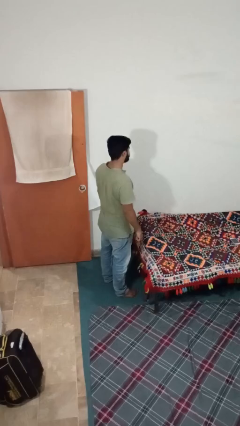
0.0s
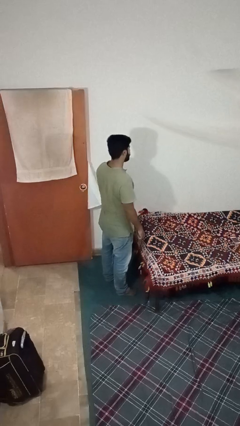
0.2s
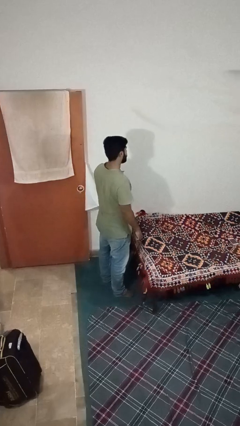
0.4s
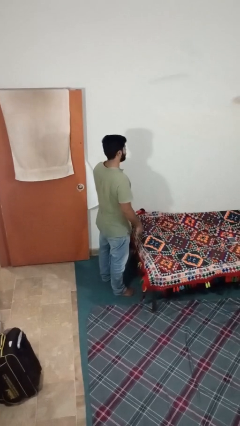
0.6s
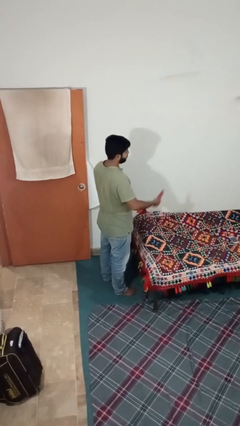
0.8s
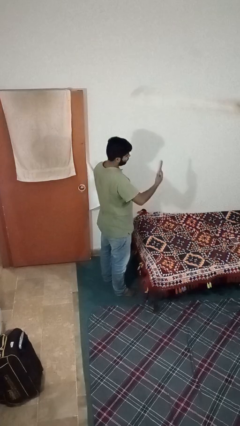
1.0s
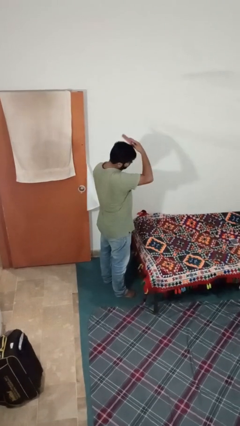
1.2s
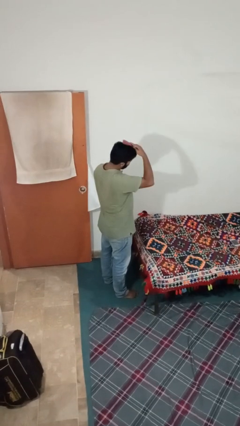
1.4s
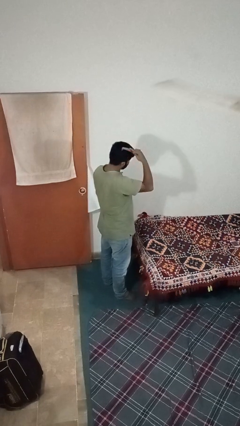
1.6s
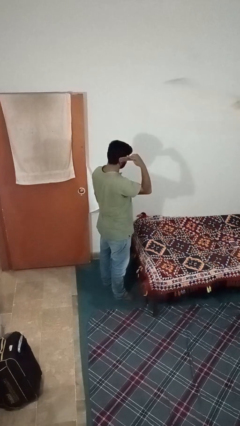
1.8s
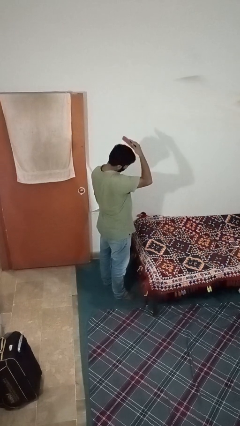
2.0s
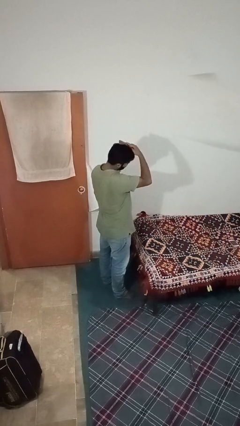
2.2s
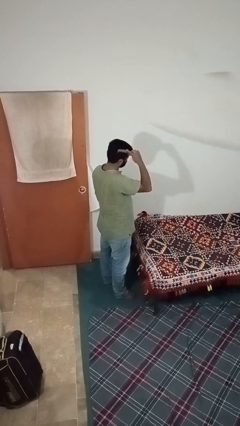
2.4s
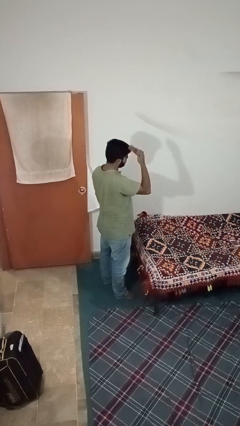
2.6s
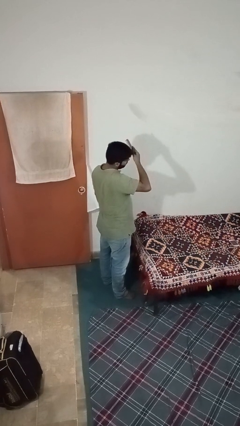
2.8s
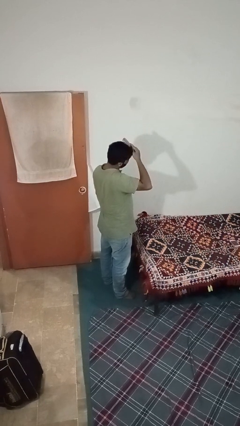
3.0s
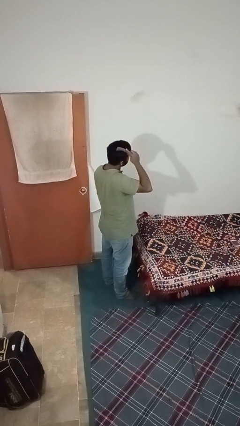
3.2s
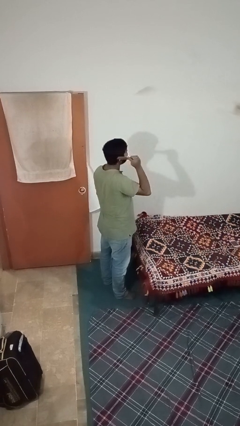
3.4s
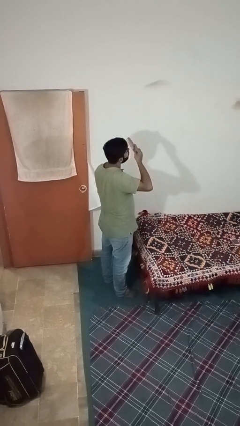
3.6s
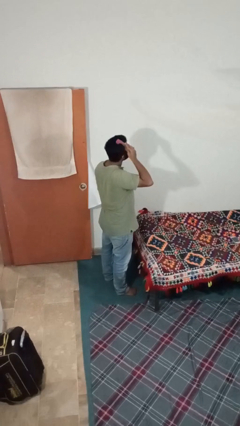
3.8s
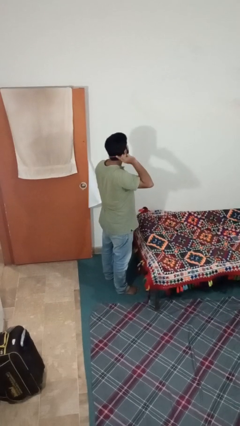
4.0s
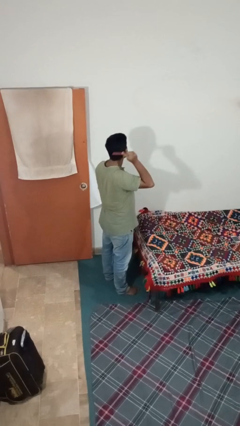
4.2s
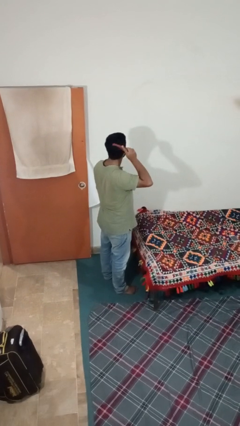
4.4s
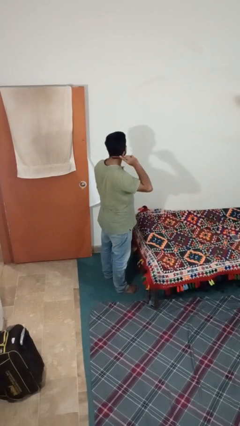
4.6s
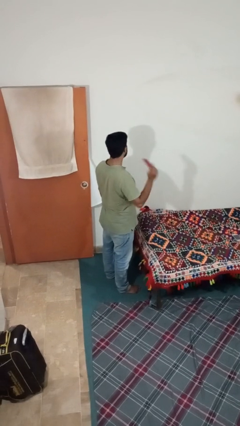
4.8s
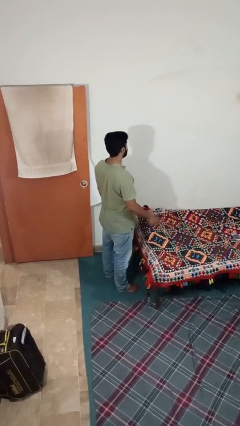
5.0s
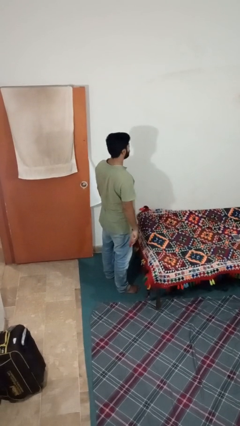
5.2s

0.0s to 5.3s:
person brushes hair

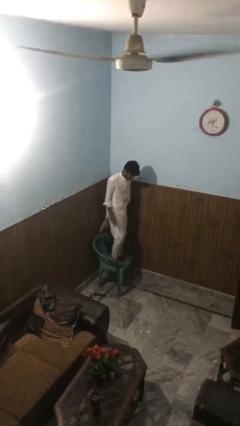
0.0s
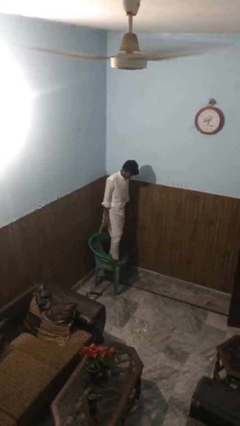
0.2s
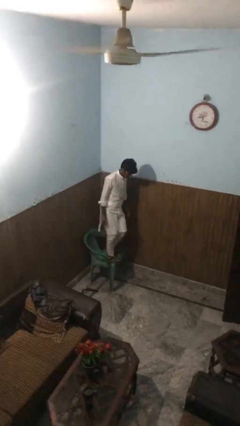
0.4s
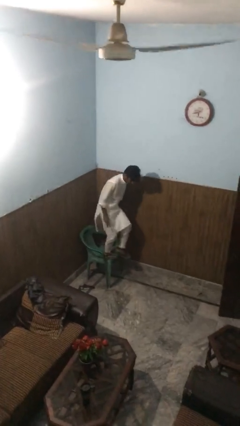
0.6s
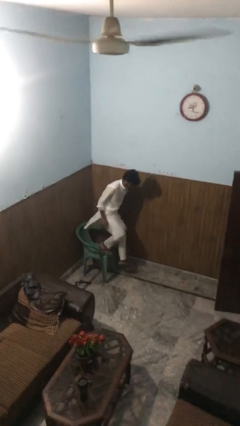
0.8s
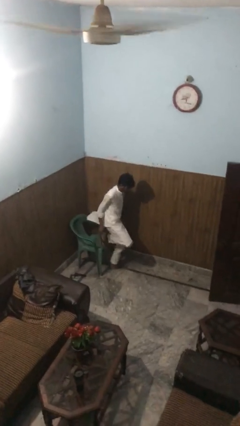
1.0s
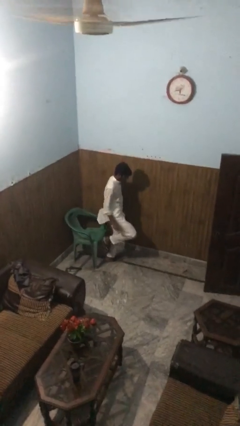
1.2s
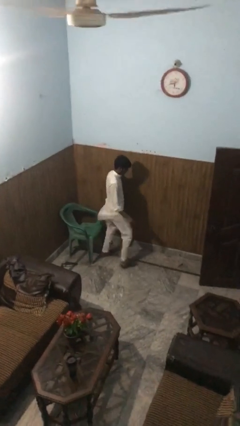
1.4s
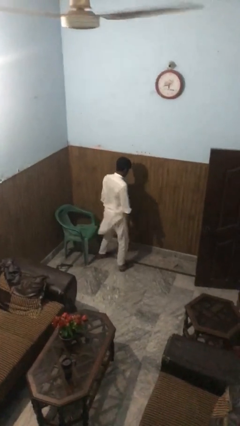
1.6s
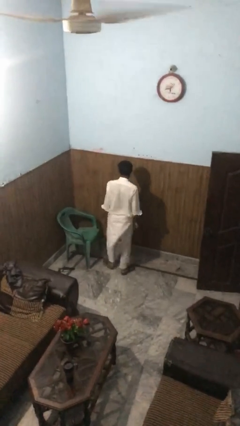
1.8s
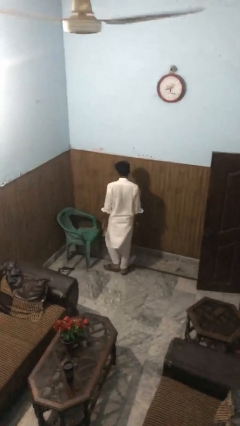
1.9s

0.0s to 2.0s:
person climbs off chair

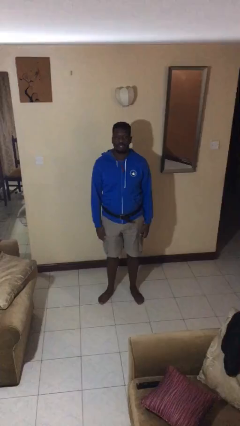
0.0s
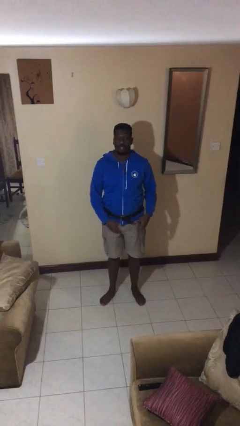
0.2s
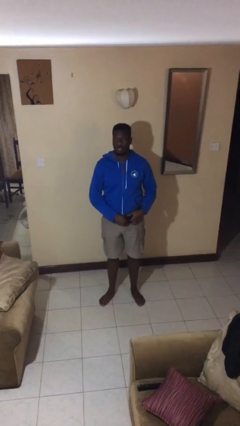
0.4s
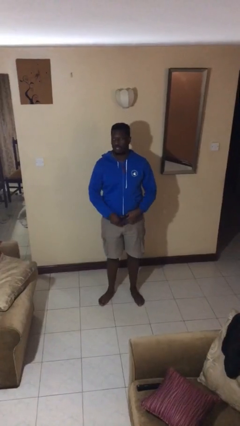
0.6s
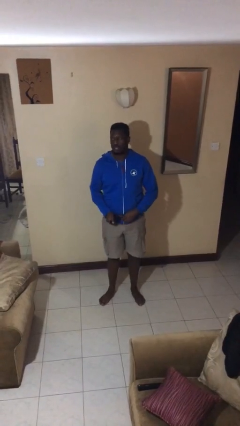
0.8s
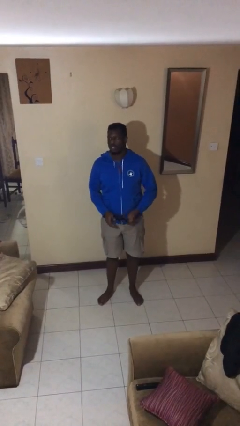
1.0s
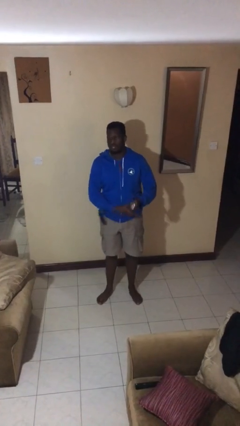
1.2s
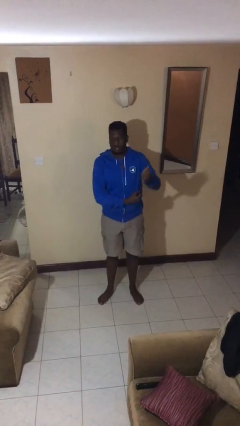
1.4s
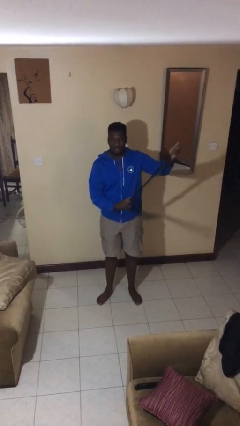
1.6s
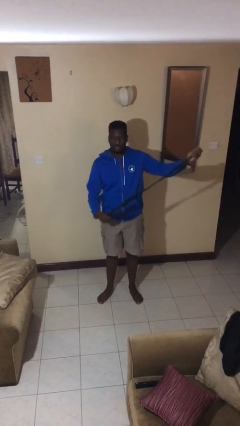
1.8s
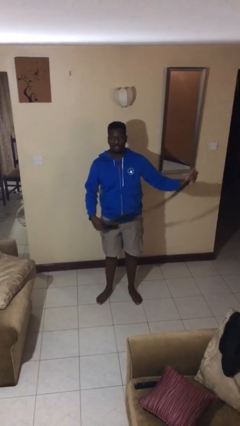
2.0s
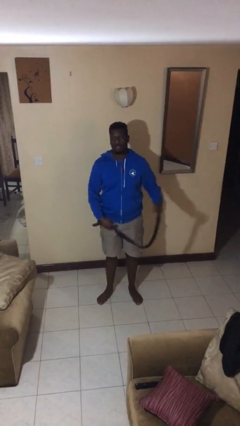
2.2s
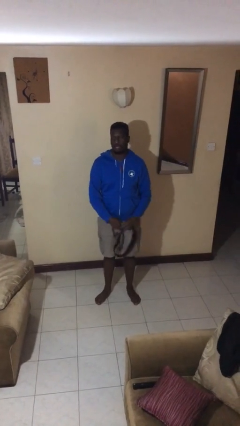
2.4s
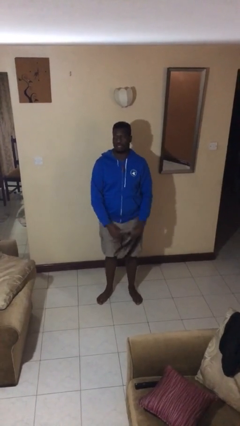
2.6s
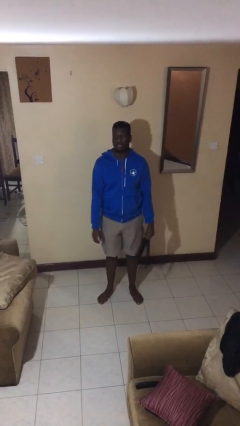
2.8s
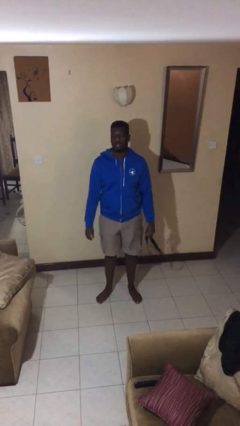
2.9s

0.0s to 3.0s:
person takes off belt

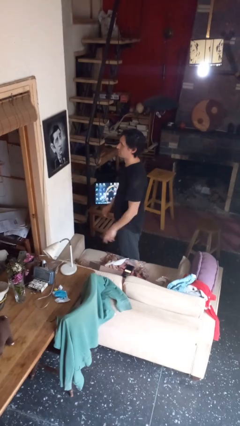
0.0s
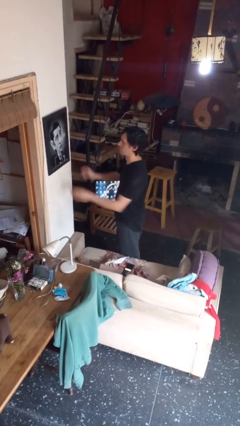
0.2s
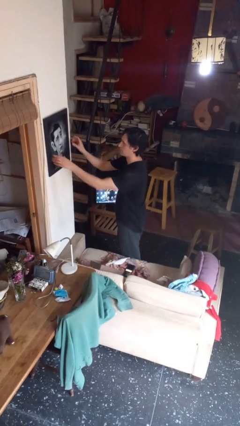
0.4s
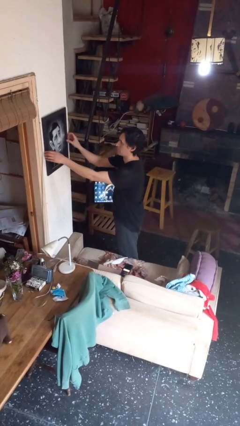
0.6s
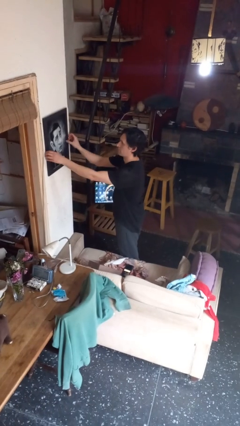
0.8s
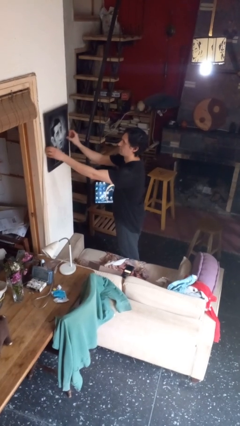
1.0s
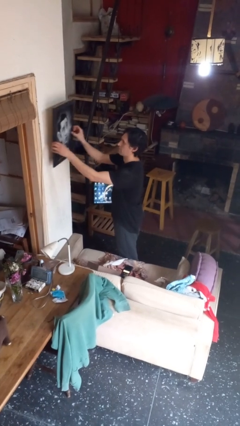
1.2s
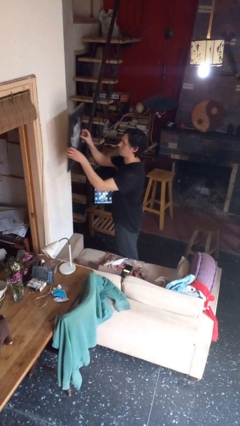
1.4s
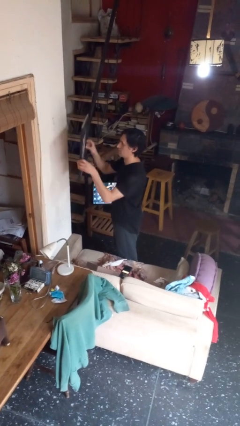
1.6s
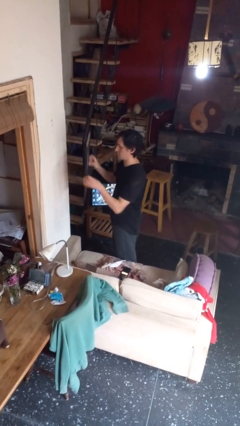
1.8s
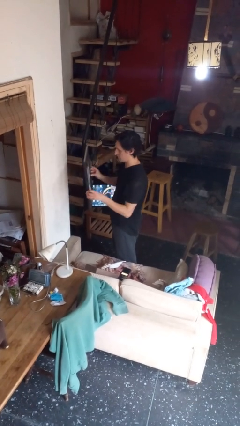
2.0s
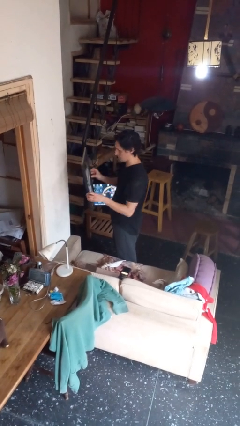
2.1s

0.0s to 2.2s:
person takes down picture frame

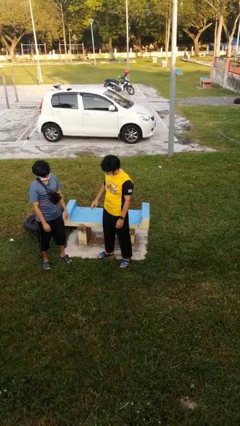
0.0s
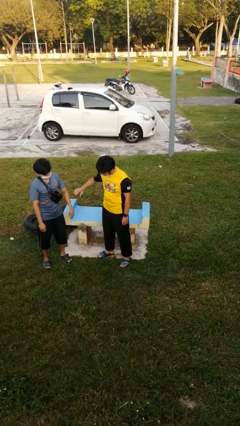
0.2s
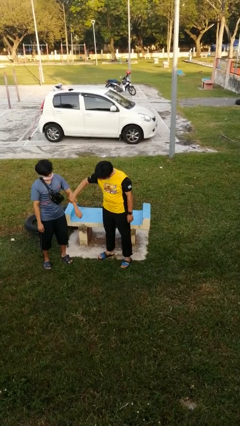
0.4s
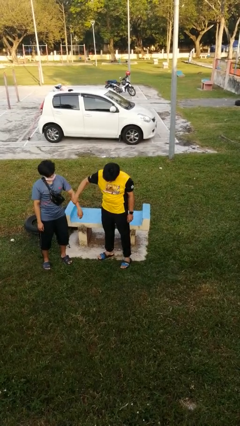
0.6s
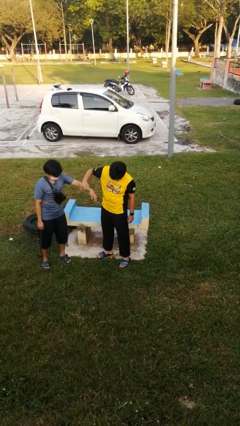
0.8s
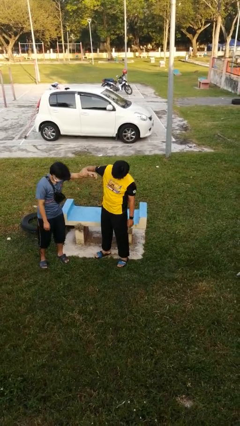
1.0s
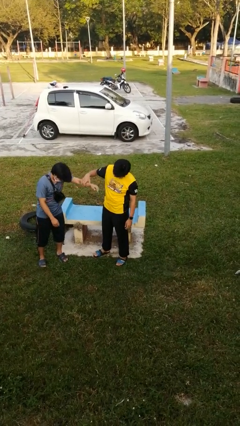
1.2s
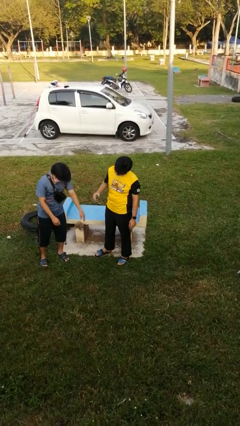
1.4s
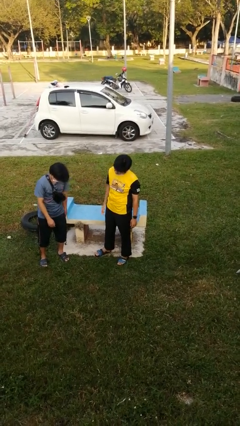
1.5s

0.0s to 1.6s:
person grabs person by forearm

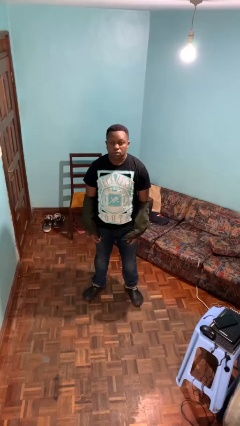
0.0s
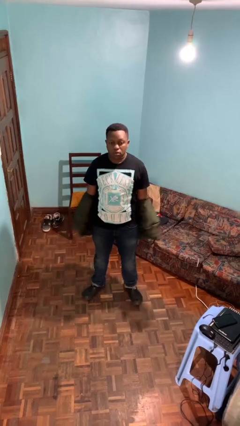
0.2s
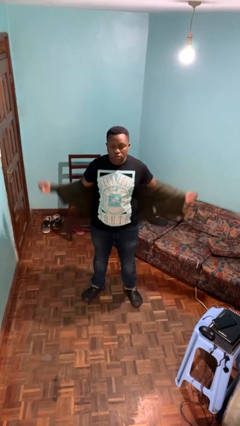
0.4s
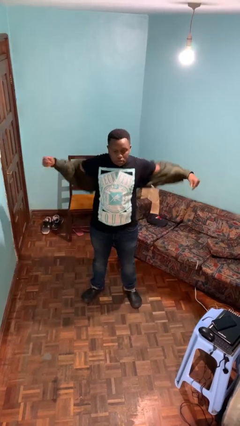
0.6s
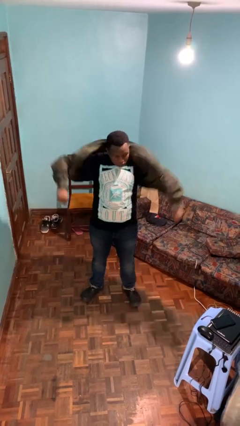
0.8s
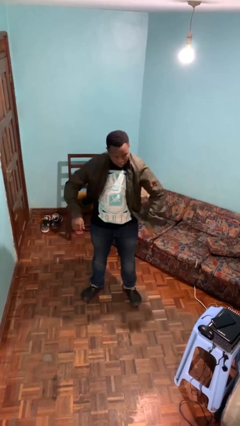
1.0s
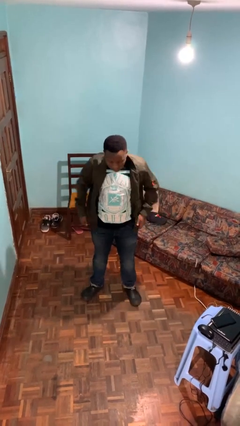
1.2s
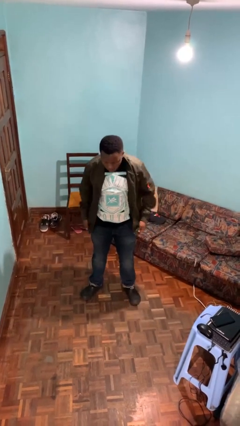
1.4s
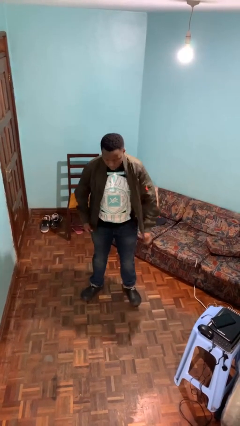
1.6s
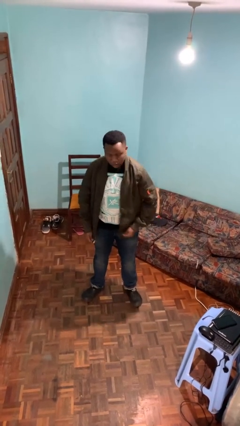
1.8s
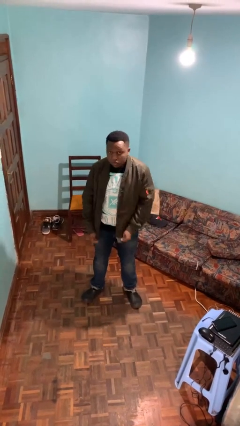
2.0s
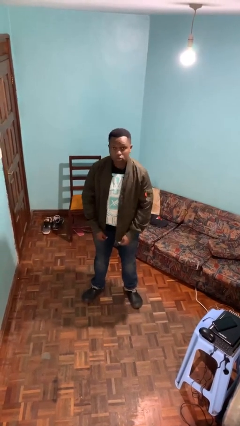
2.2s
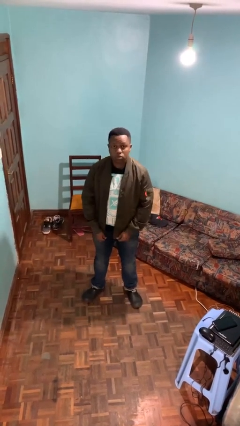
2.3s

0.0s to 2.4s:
person puts on jacket

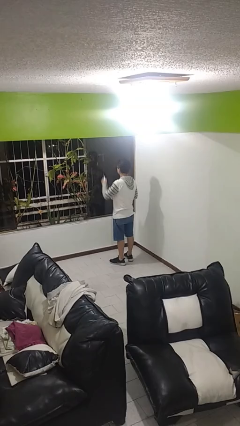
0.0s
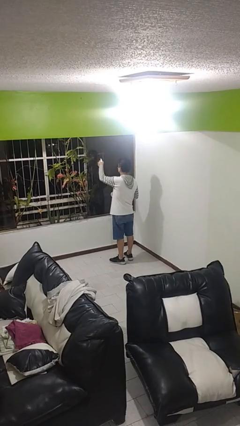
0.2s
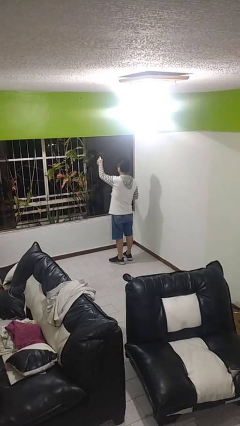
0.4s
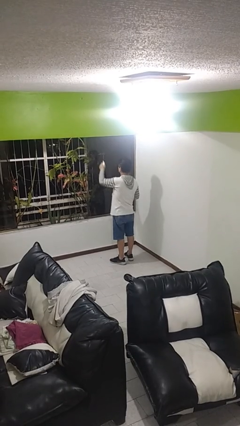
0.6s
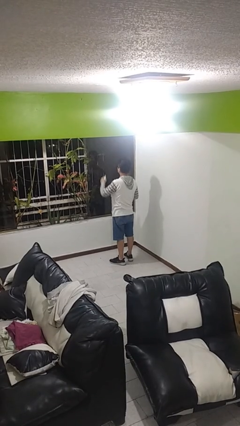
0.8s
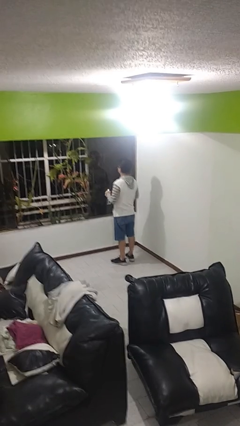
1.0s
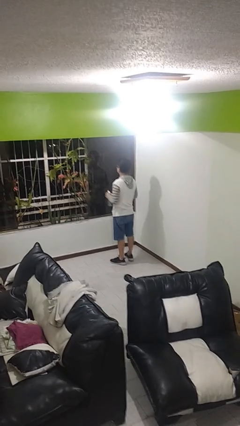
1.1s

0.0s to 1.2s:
person sprays from bottle
